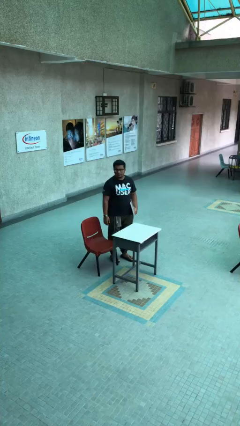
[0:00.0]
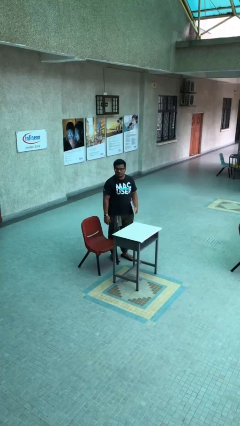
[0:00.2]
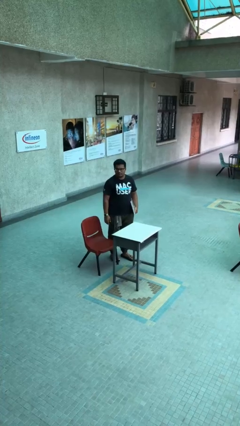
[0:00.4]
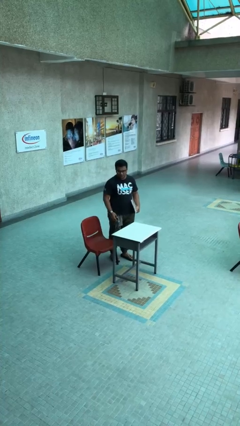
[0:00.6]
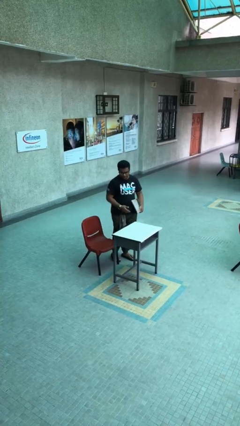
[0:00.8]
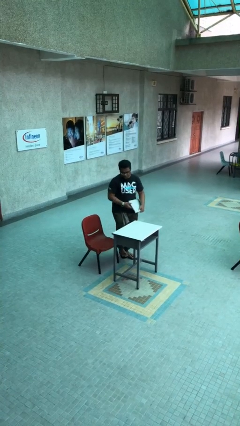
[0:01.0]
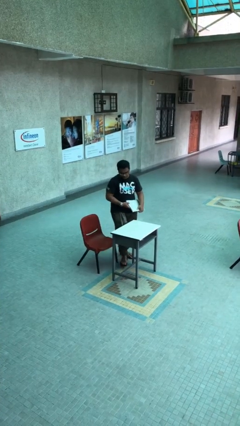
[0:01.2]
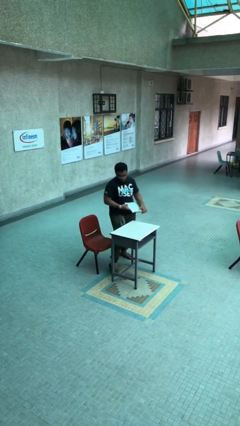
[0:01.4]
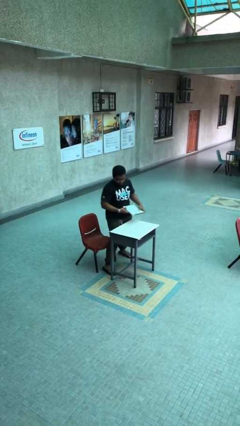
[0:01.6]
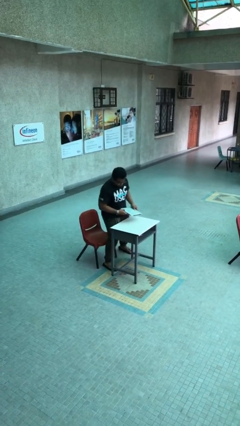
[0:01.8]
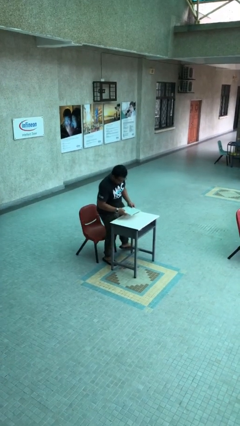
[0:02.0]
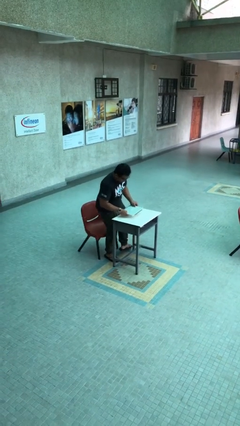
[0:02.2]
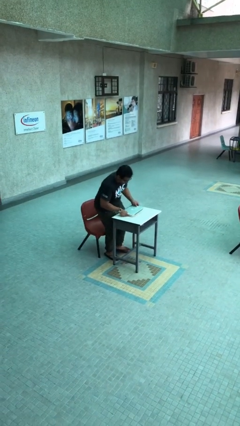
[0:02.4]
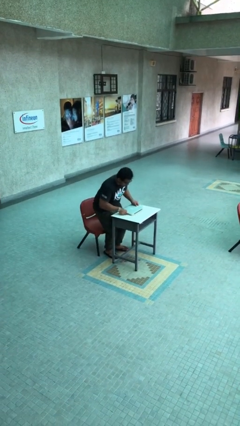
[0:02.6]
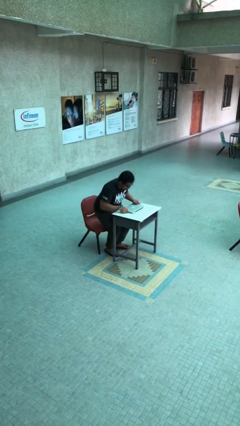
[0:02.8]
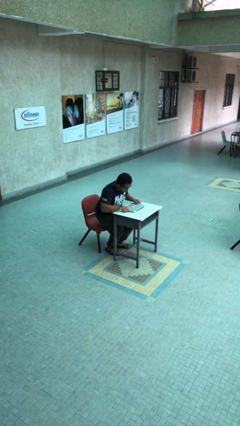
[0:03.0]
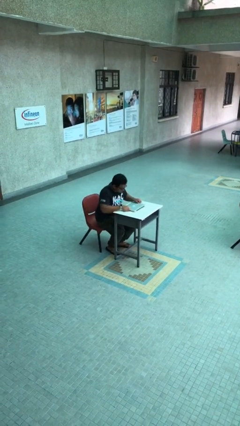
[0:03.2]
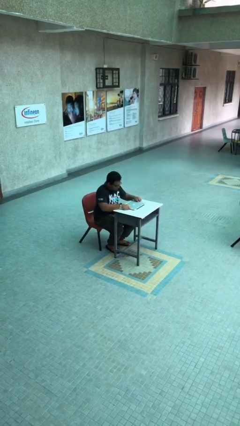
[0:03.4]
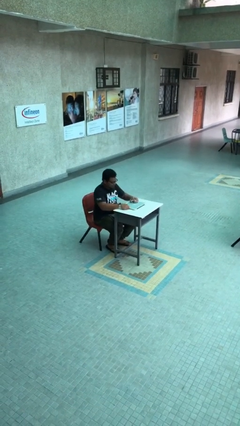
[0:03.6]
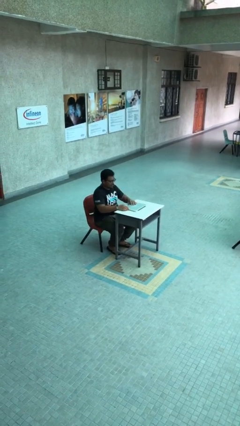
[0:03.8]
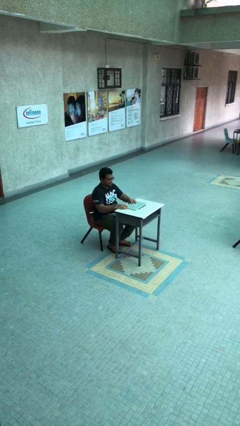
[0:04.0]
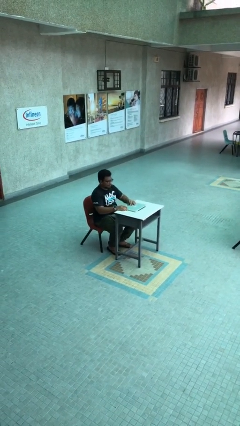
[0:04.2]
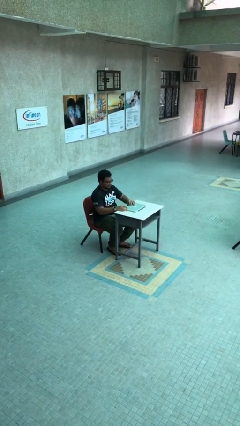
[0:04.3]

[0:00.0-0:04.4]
person sits down

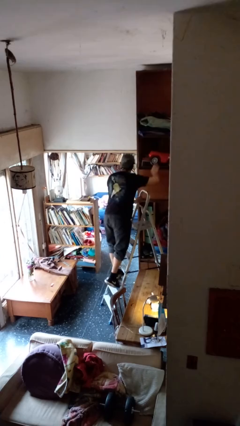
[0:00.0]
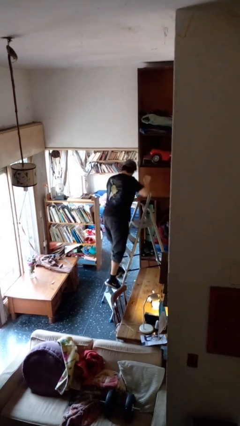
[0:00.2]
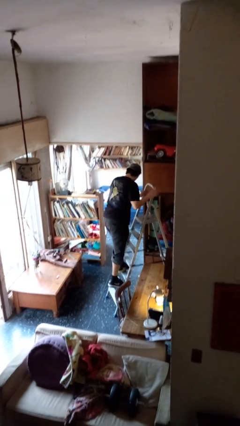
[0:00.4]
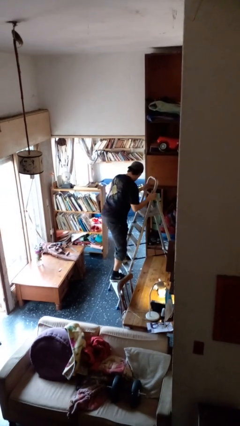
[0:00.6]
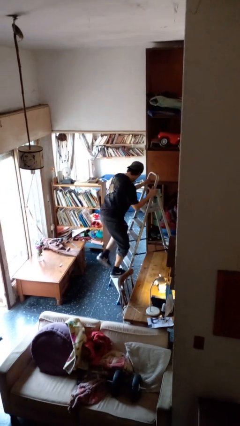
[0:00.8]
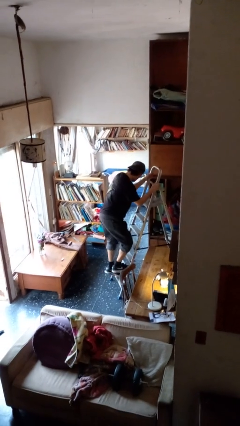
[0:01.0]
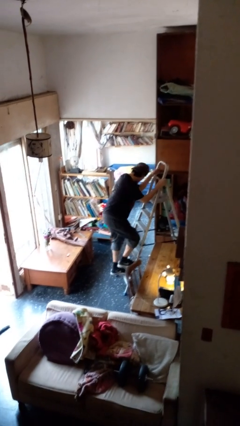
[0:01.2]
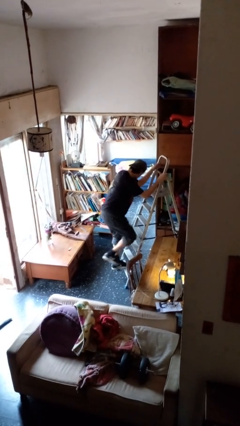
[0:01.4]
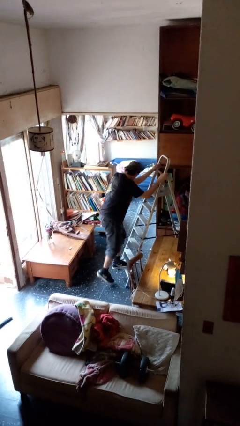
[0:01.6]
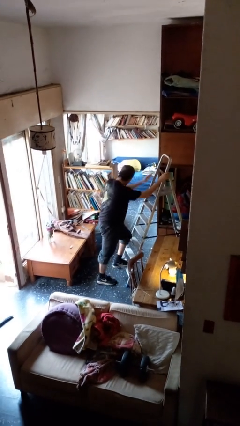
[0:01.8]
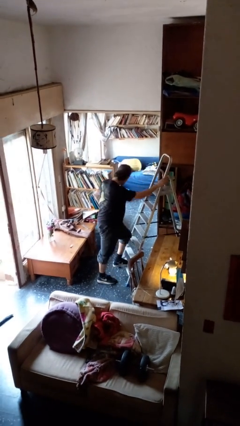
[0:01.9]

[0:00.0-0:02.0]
person climbs down ladder

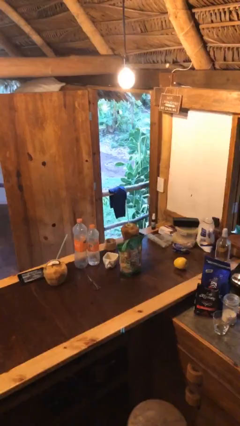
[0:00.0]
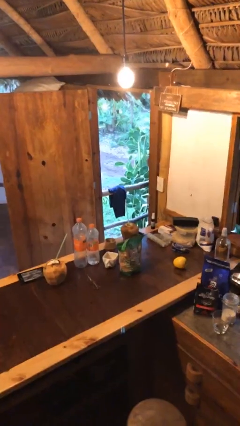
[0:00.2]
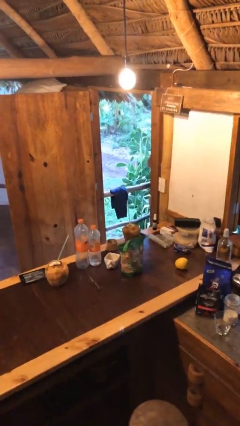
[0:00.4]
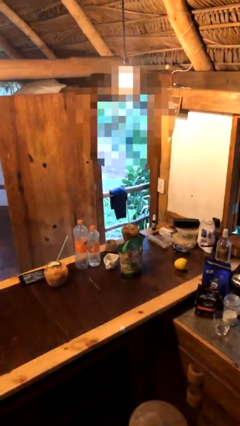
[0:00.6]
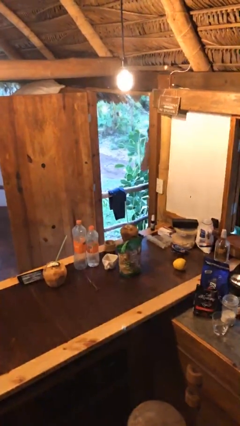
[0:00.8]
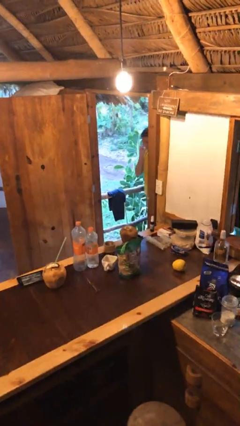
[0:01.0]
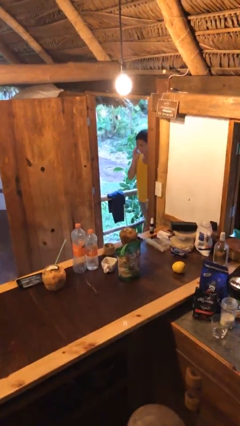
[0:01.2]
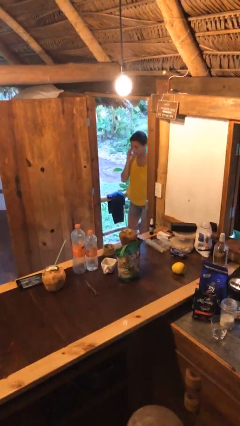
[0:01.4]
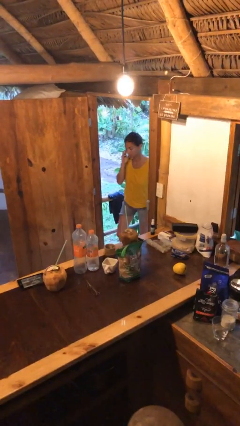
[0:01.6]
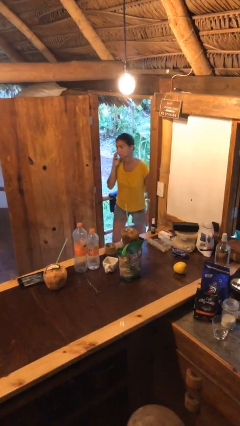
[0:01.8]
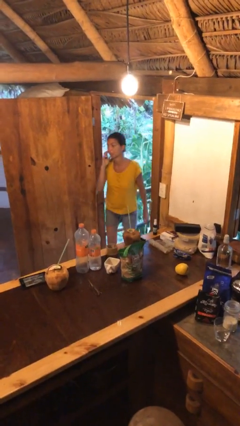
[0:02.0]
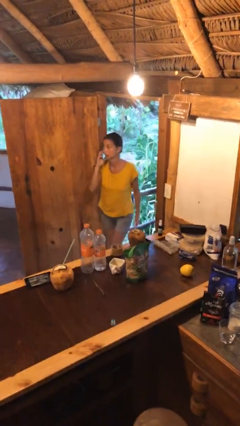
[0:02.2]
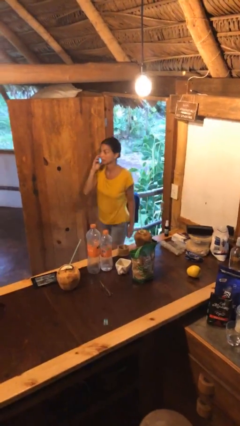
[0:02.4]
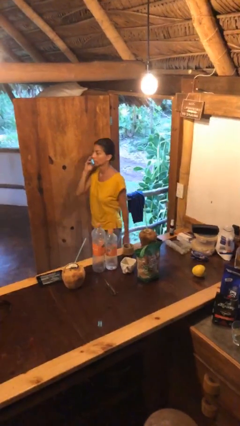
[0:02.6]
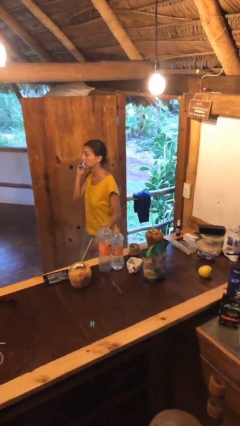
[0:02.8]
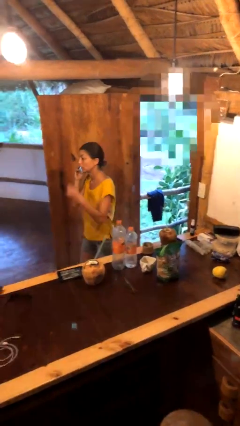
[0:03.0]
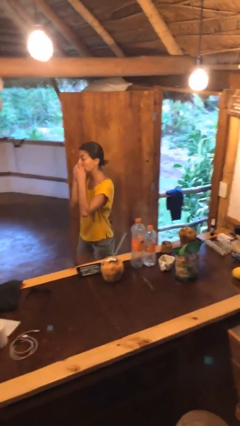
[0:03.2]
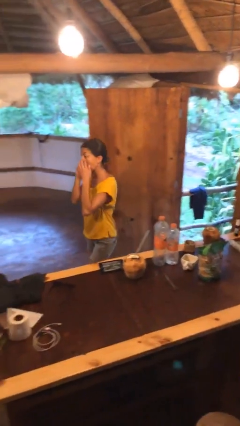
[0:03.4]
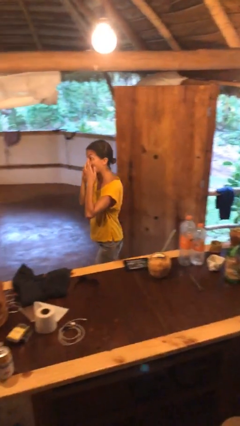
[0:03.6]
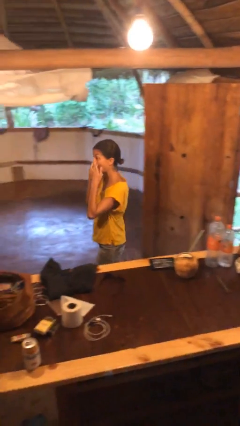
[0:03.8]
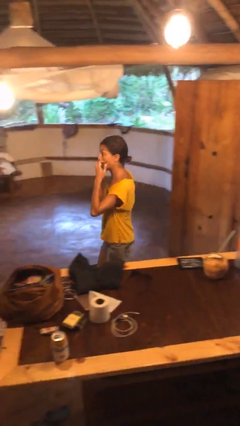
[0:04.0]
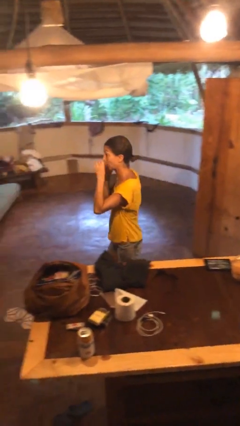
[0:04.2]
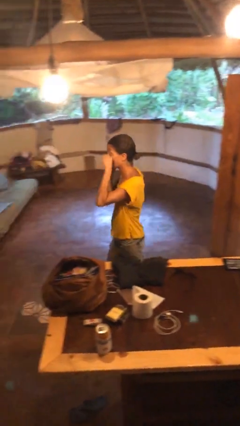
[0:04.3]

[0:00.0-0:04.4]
person enters scene through structure

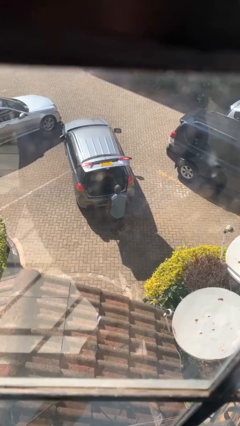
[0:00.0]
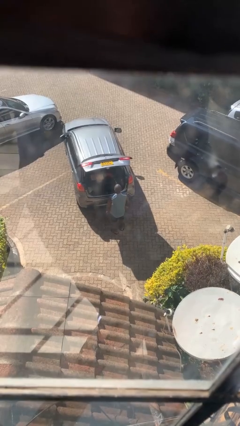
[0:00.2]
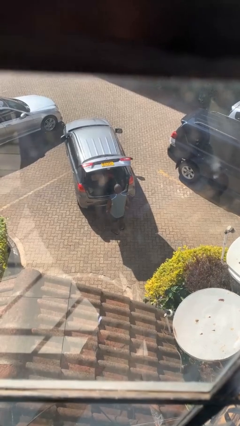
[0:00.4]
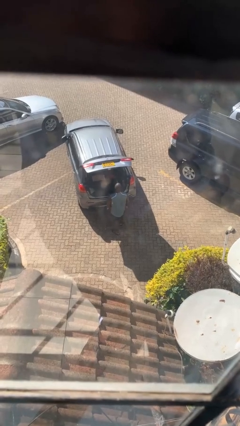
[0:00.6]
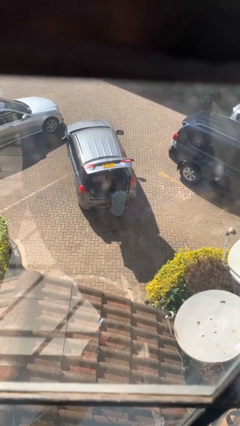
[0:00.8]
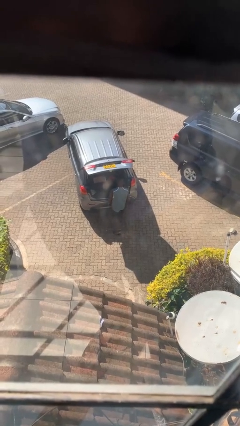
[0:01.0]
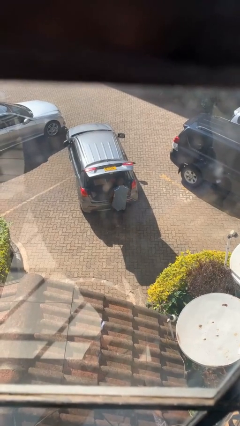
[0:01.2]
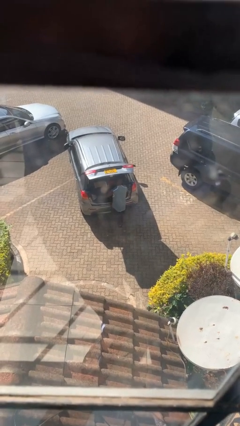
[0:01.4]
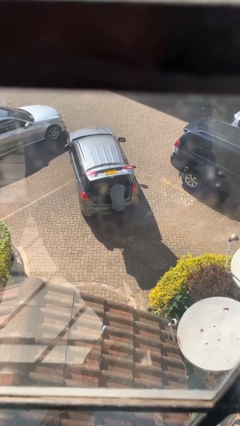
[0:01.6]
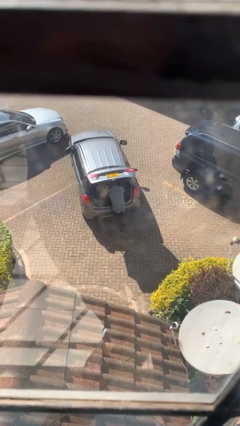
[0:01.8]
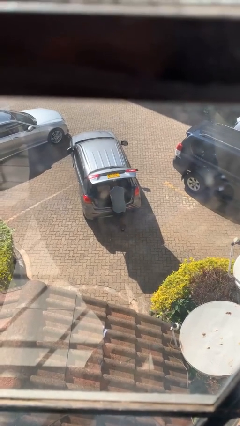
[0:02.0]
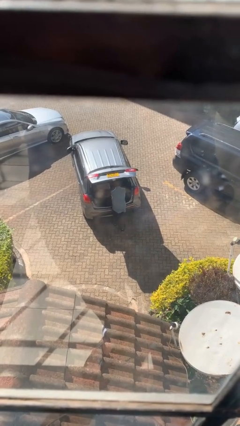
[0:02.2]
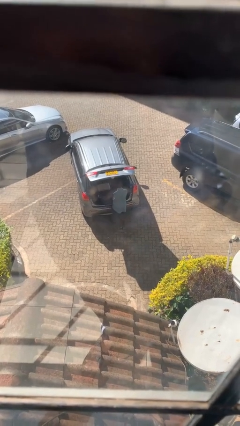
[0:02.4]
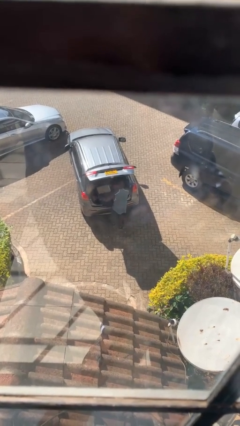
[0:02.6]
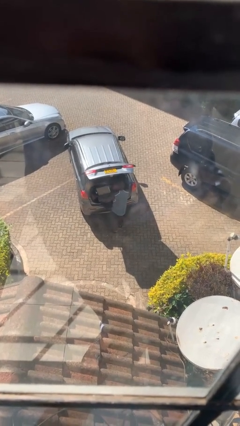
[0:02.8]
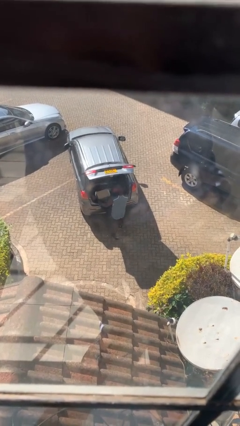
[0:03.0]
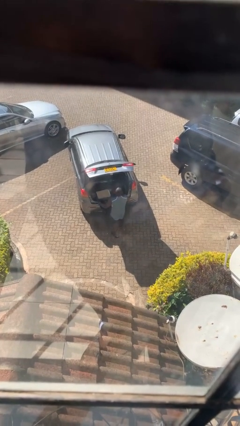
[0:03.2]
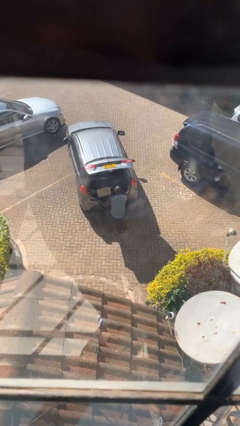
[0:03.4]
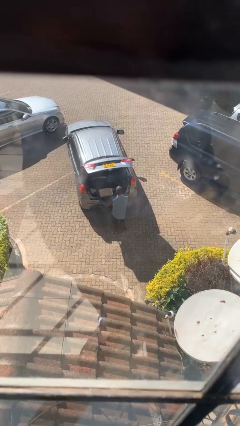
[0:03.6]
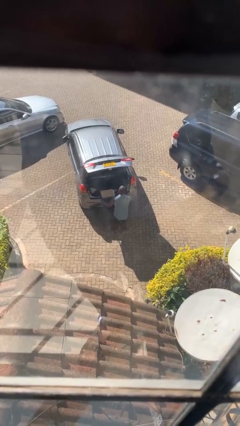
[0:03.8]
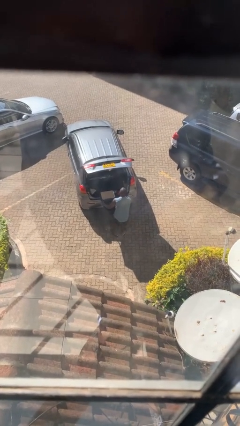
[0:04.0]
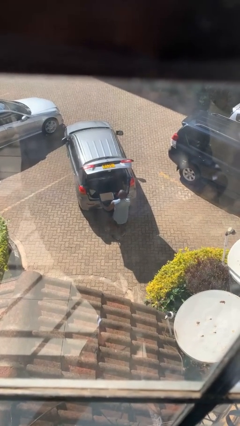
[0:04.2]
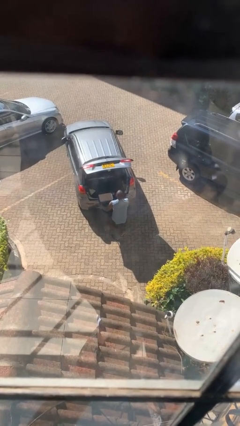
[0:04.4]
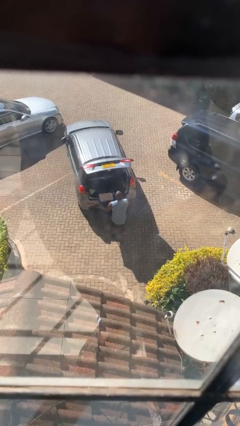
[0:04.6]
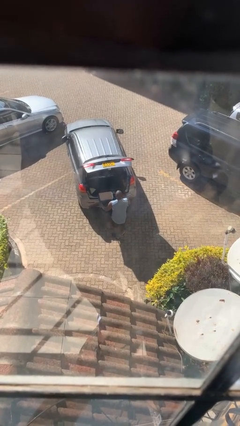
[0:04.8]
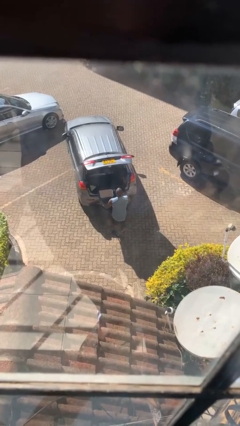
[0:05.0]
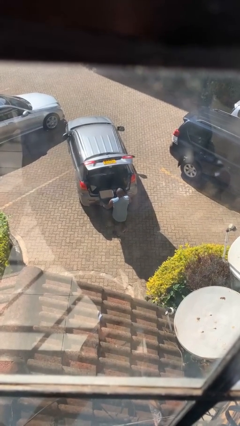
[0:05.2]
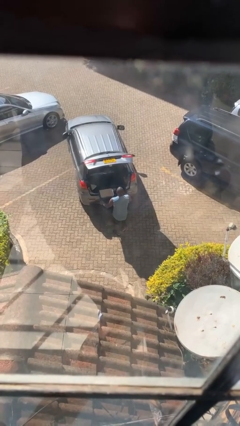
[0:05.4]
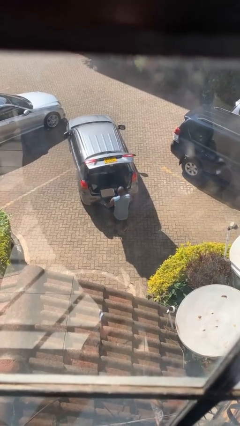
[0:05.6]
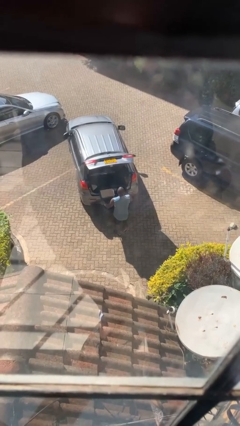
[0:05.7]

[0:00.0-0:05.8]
person unloads car

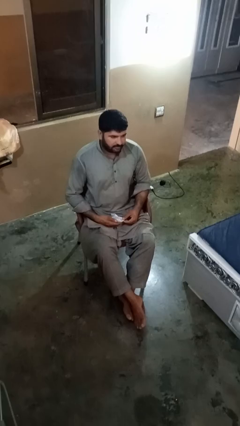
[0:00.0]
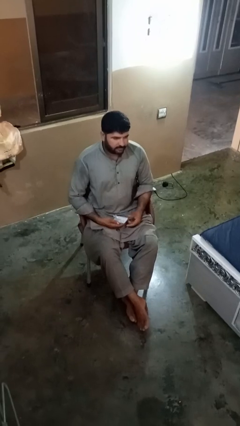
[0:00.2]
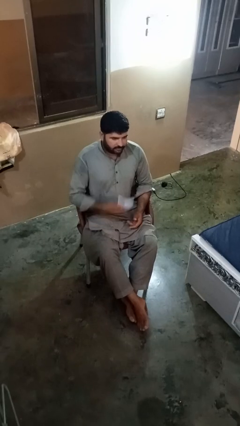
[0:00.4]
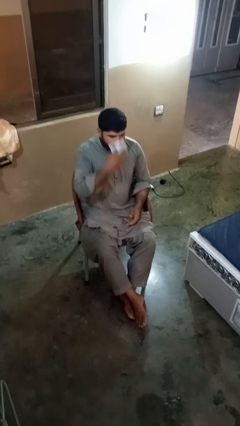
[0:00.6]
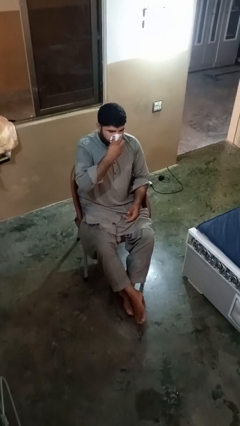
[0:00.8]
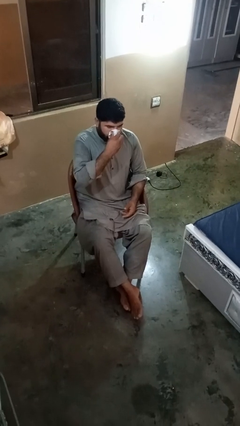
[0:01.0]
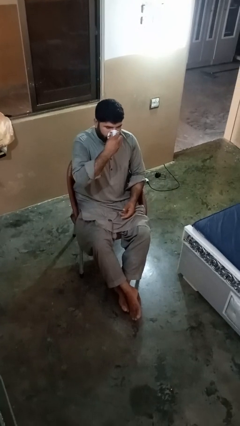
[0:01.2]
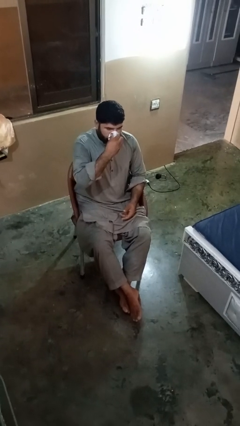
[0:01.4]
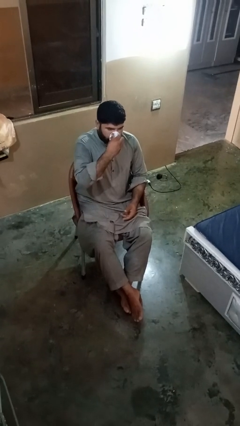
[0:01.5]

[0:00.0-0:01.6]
person blows nose
